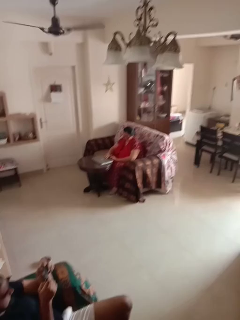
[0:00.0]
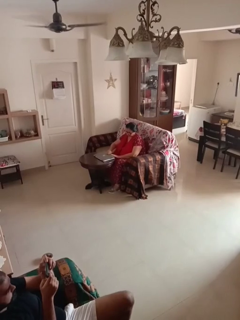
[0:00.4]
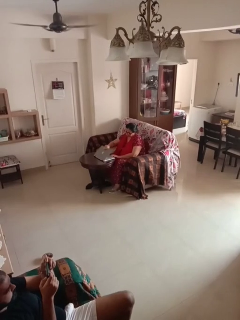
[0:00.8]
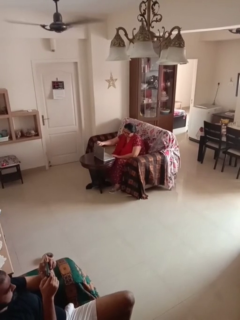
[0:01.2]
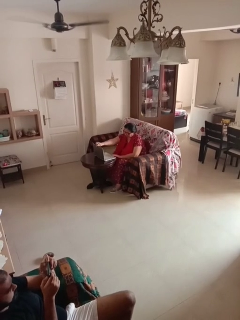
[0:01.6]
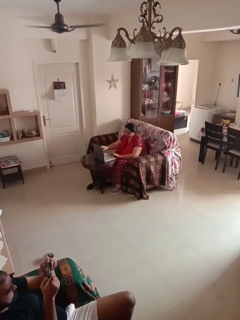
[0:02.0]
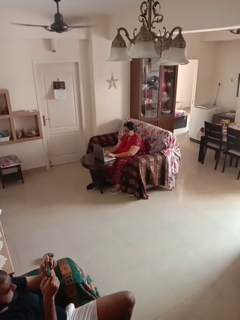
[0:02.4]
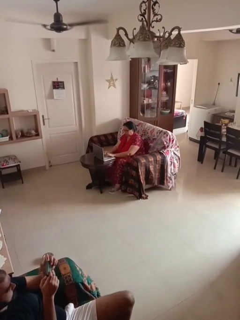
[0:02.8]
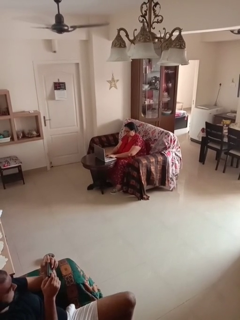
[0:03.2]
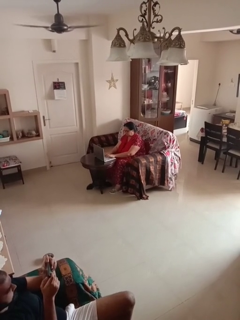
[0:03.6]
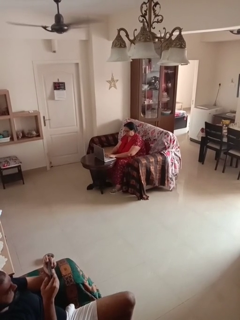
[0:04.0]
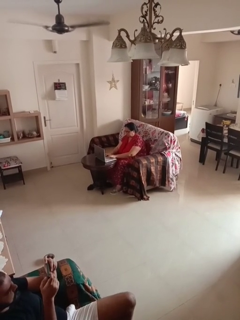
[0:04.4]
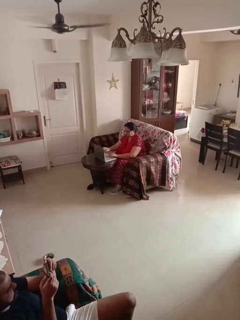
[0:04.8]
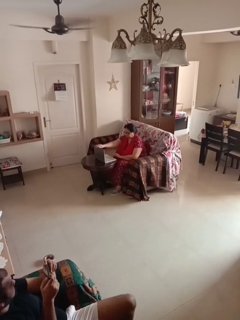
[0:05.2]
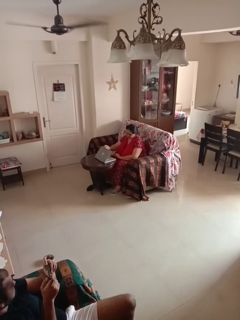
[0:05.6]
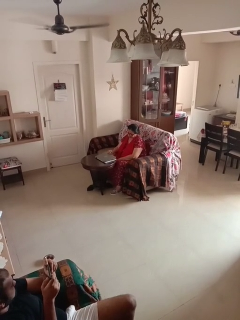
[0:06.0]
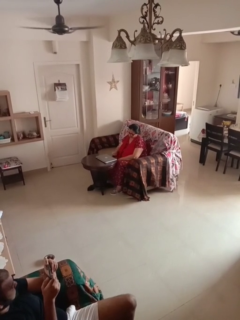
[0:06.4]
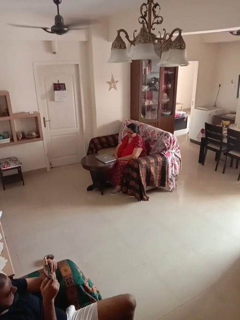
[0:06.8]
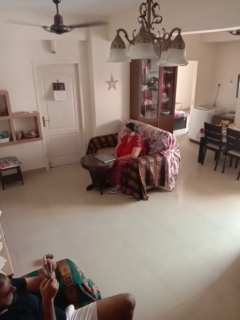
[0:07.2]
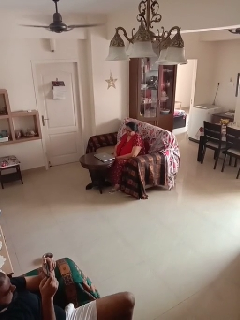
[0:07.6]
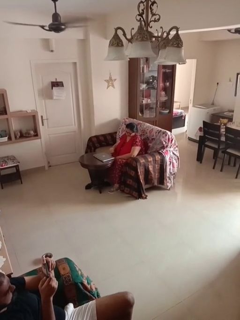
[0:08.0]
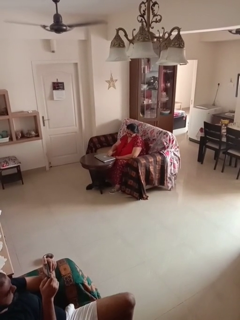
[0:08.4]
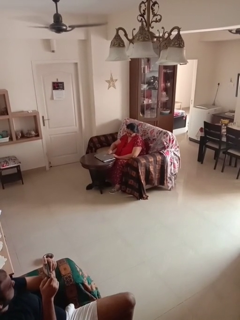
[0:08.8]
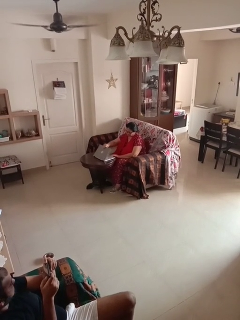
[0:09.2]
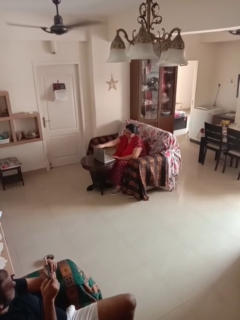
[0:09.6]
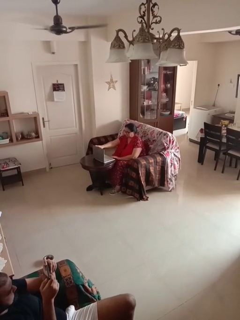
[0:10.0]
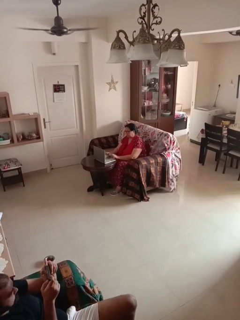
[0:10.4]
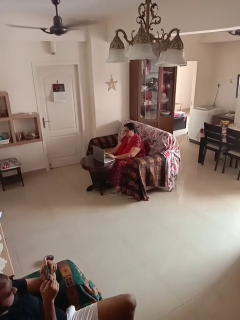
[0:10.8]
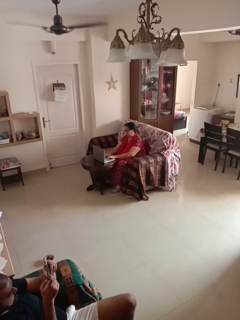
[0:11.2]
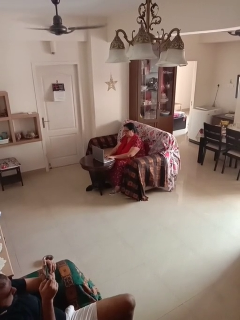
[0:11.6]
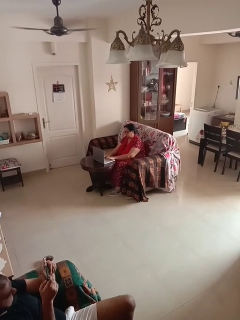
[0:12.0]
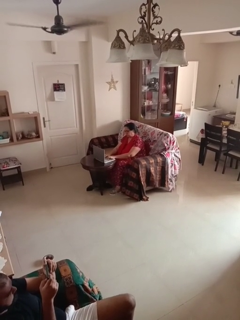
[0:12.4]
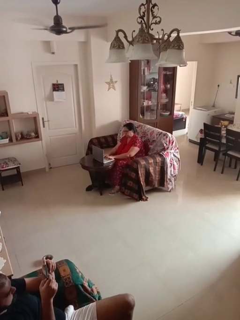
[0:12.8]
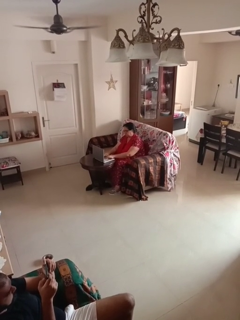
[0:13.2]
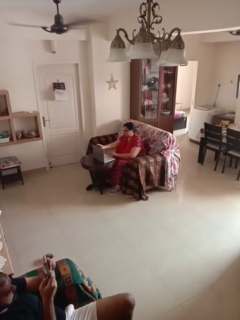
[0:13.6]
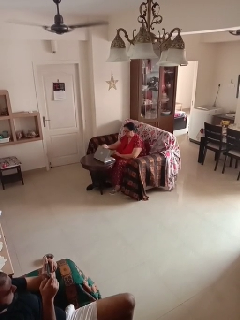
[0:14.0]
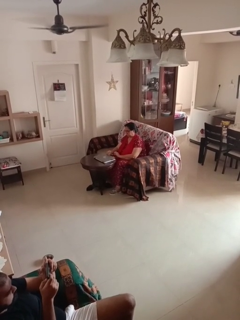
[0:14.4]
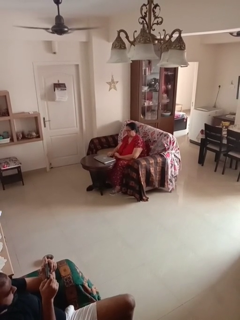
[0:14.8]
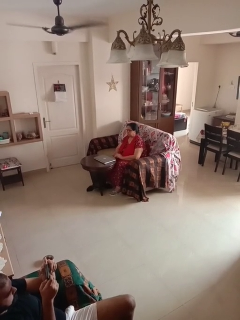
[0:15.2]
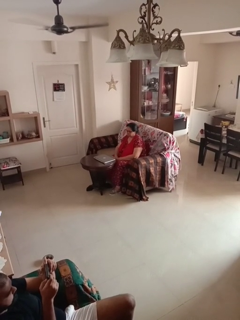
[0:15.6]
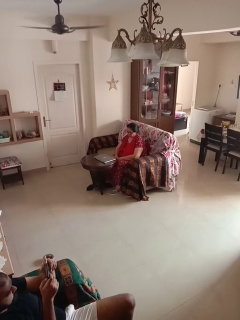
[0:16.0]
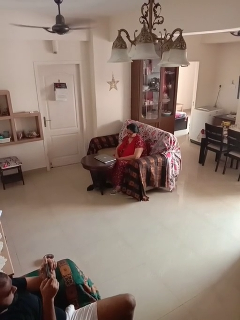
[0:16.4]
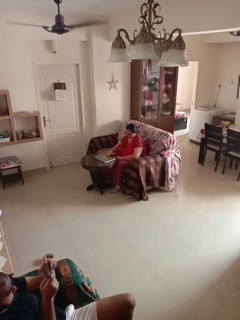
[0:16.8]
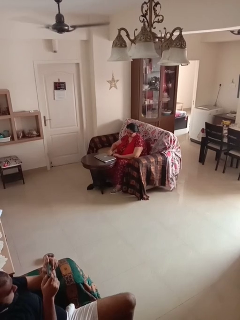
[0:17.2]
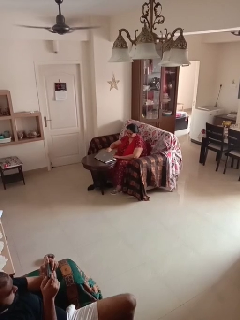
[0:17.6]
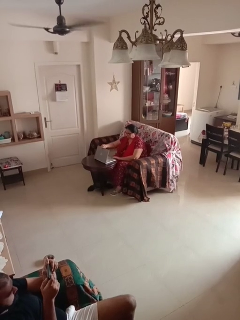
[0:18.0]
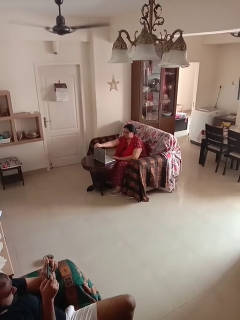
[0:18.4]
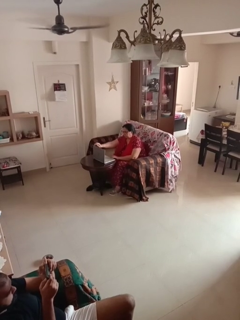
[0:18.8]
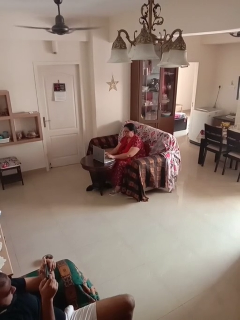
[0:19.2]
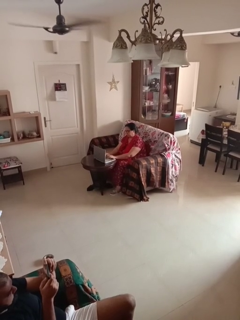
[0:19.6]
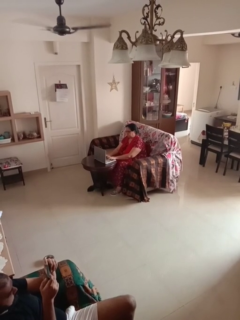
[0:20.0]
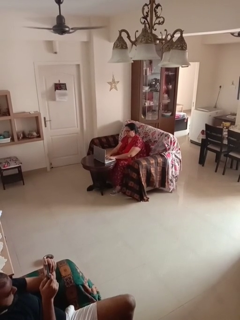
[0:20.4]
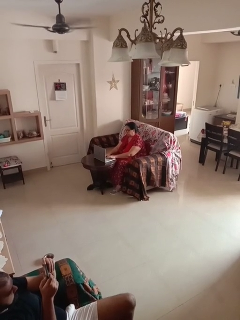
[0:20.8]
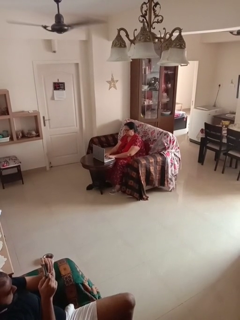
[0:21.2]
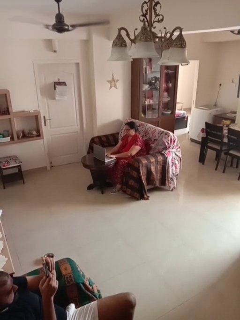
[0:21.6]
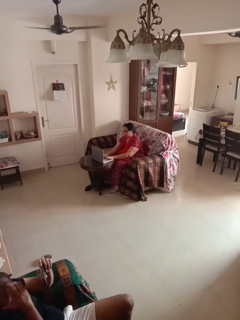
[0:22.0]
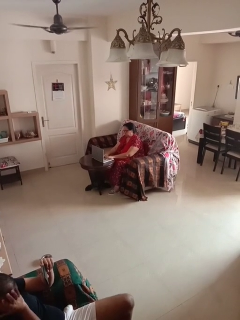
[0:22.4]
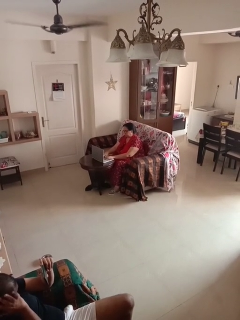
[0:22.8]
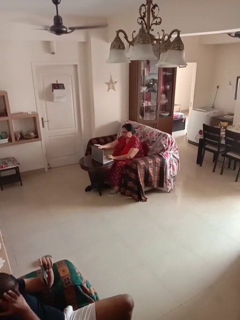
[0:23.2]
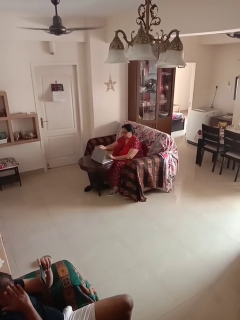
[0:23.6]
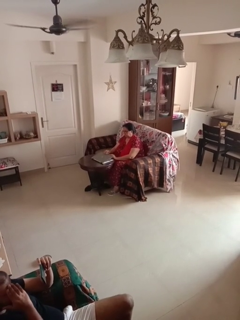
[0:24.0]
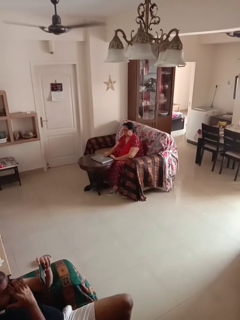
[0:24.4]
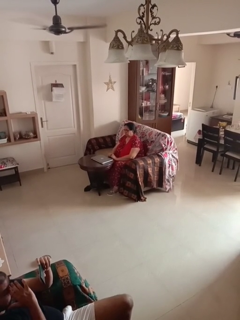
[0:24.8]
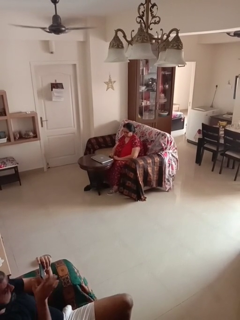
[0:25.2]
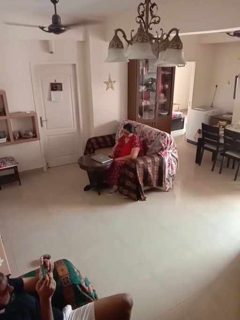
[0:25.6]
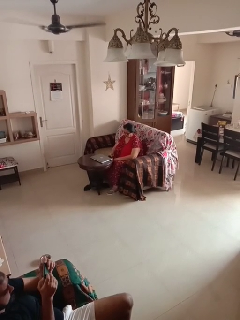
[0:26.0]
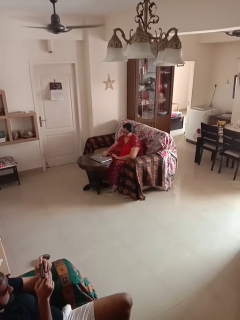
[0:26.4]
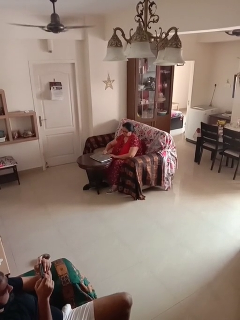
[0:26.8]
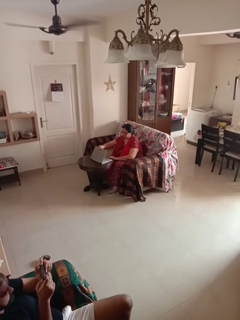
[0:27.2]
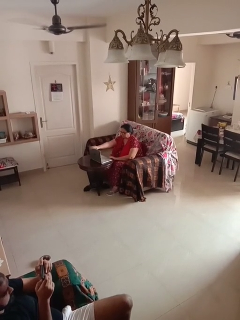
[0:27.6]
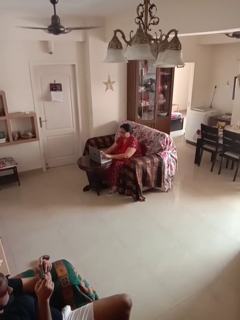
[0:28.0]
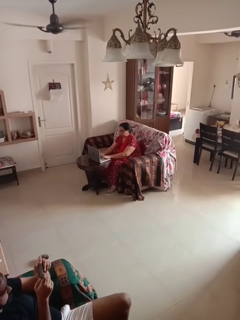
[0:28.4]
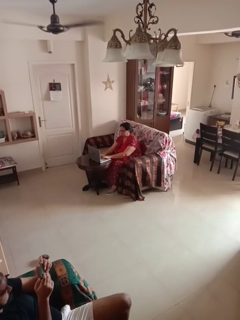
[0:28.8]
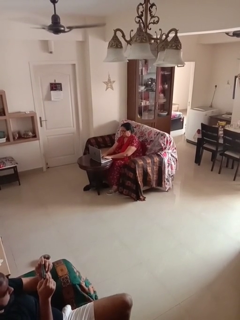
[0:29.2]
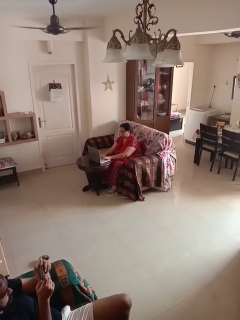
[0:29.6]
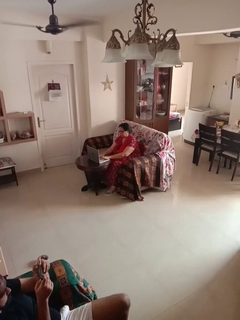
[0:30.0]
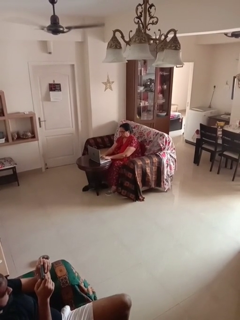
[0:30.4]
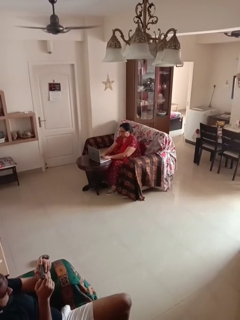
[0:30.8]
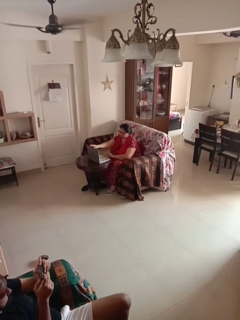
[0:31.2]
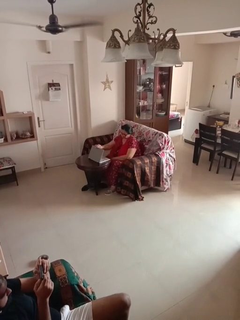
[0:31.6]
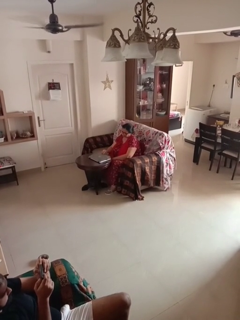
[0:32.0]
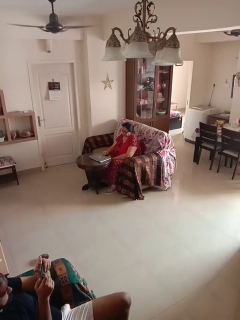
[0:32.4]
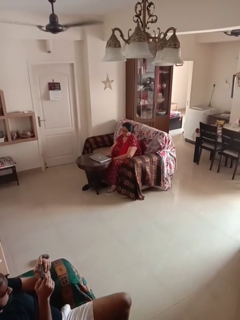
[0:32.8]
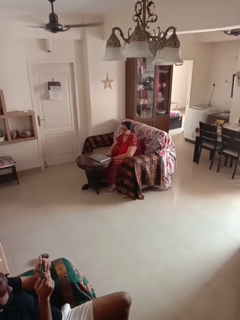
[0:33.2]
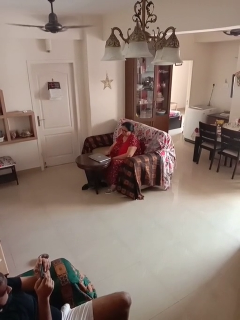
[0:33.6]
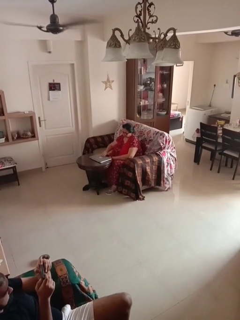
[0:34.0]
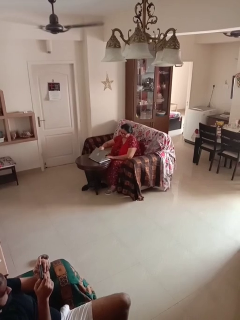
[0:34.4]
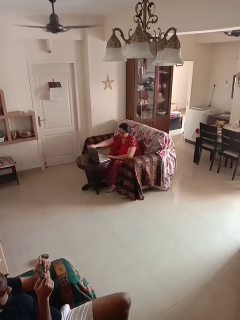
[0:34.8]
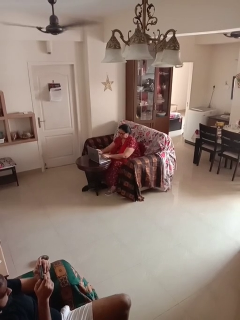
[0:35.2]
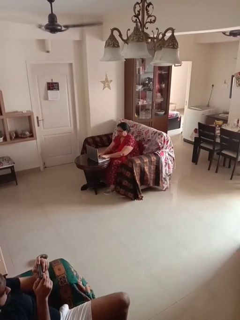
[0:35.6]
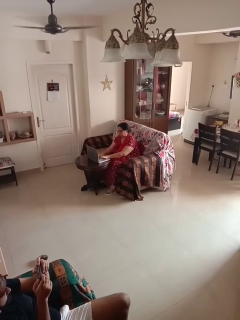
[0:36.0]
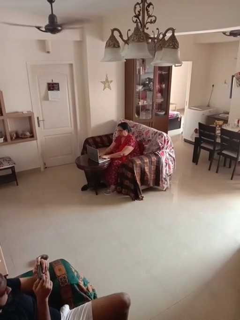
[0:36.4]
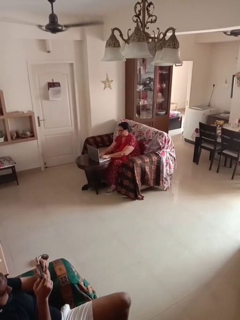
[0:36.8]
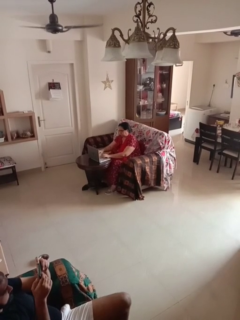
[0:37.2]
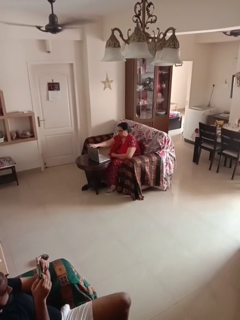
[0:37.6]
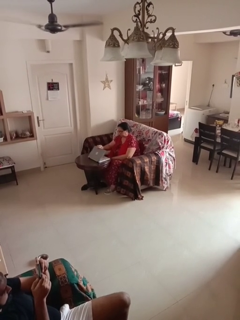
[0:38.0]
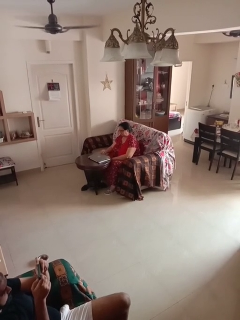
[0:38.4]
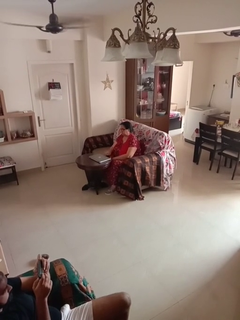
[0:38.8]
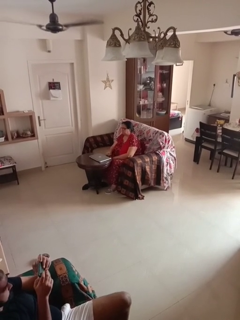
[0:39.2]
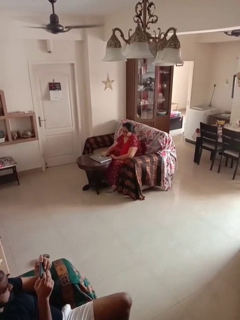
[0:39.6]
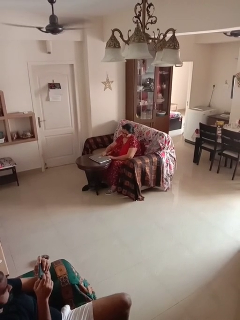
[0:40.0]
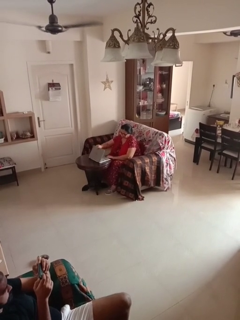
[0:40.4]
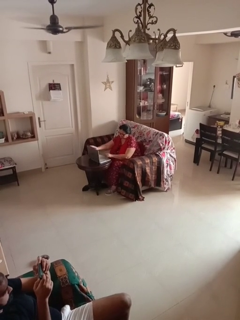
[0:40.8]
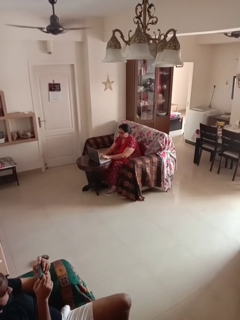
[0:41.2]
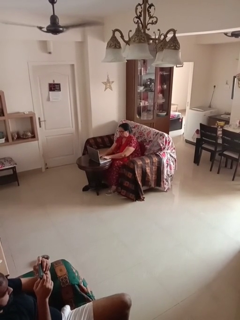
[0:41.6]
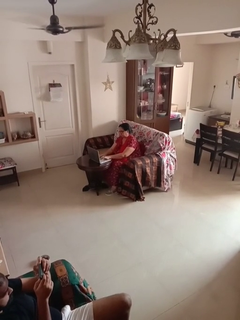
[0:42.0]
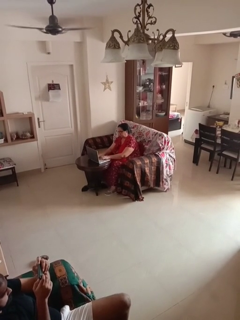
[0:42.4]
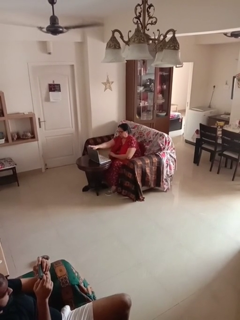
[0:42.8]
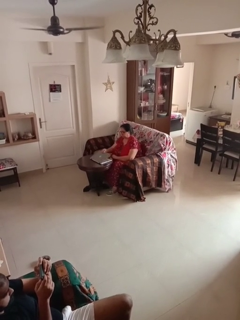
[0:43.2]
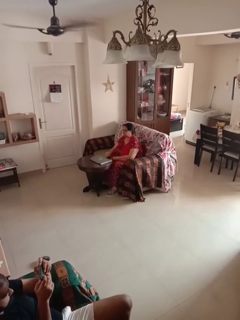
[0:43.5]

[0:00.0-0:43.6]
person interacts with laptop

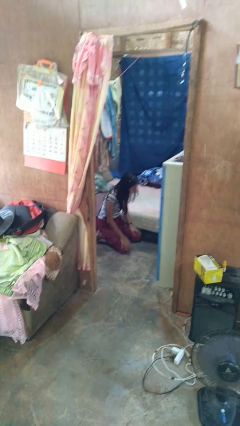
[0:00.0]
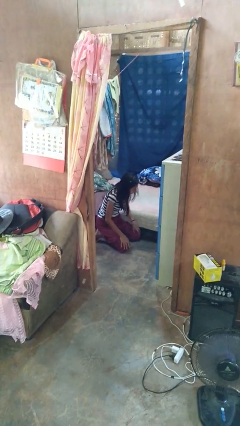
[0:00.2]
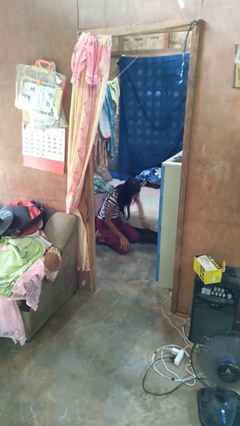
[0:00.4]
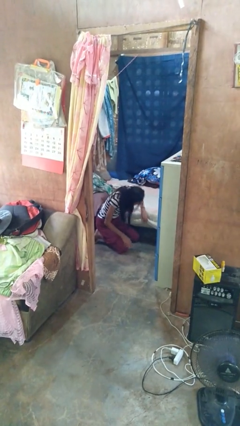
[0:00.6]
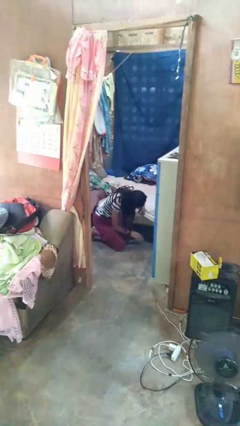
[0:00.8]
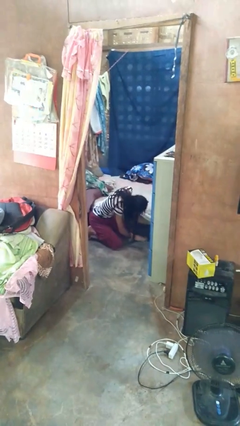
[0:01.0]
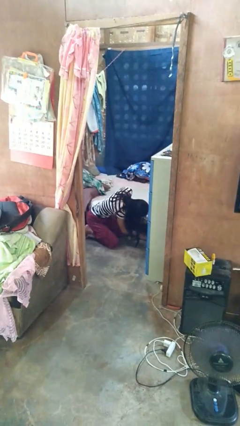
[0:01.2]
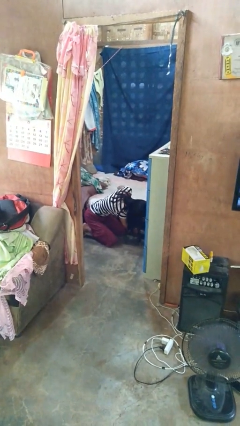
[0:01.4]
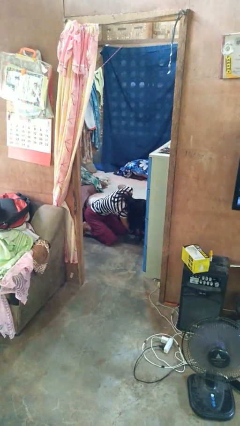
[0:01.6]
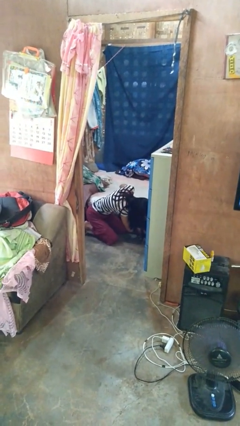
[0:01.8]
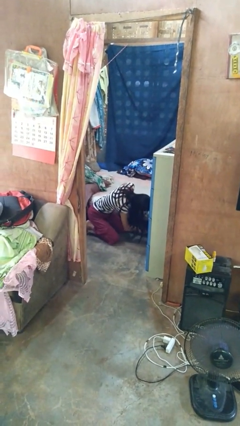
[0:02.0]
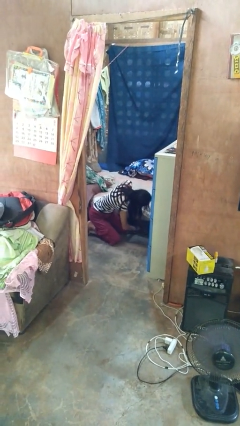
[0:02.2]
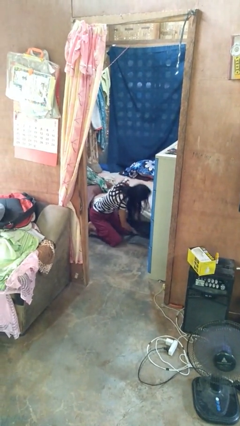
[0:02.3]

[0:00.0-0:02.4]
person searches under bed
